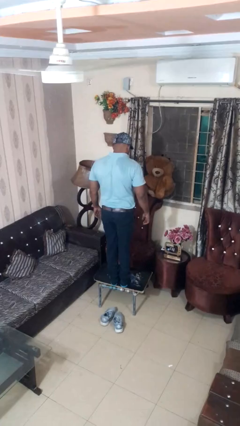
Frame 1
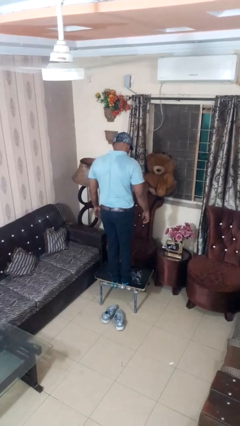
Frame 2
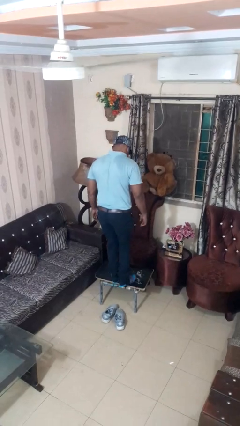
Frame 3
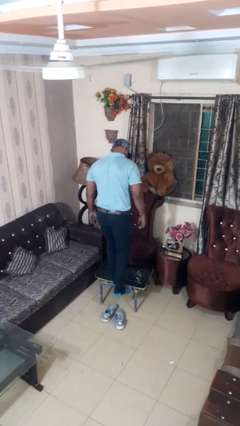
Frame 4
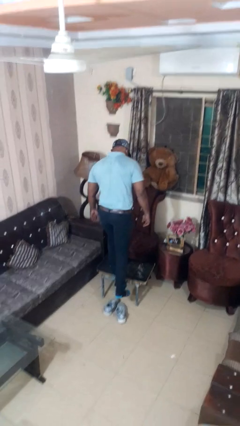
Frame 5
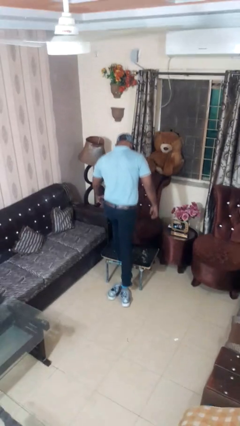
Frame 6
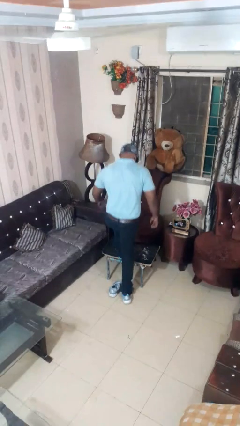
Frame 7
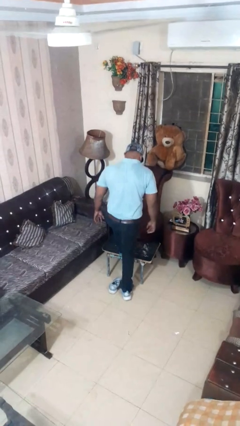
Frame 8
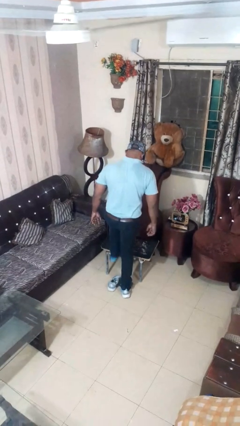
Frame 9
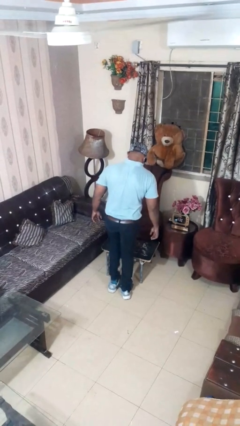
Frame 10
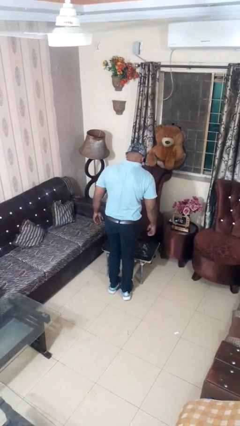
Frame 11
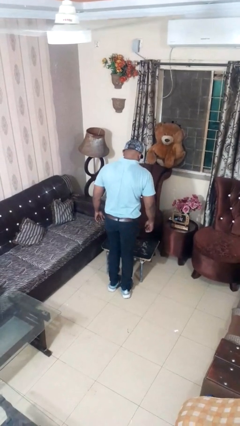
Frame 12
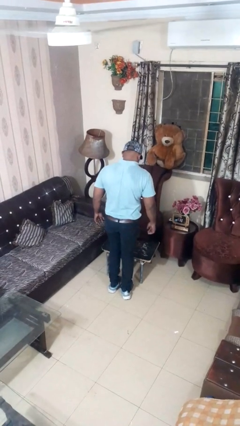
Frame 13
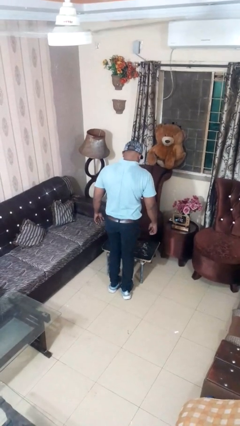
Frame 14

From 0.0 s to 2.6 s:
person climbs off table

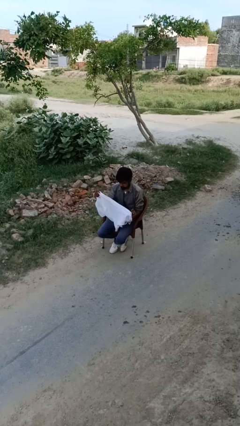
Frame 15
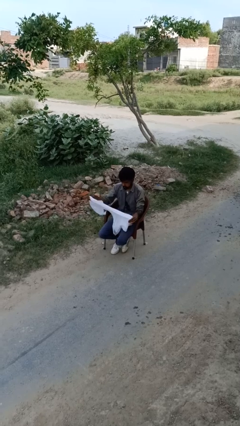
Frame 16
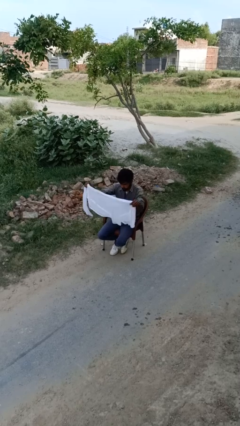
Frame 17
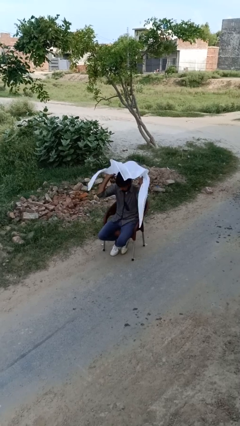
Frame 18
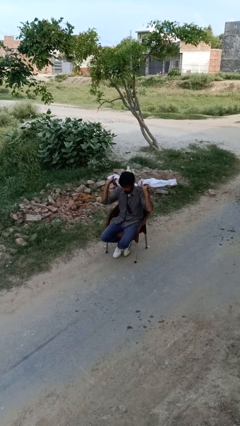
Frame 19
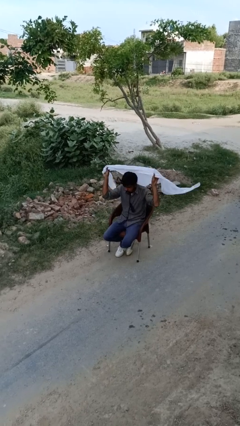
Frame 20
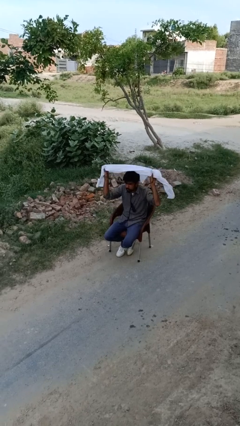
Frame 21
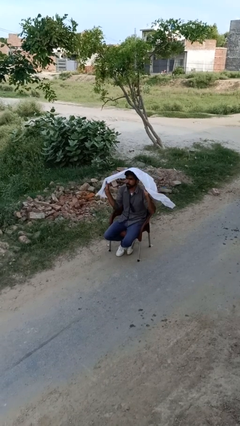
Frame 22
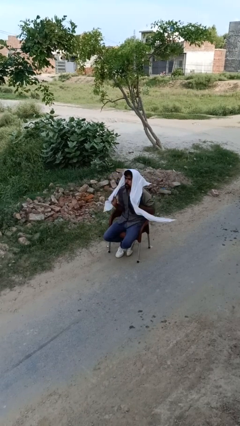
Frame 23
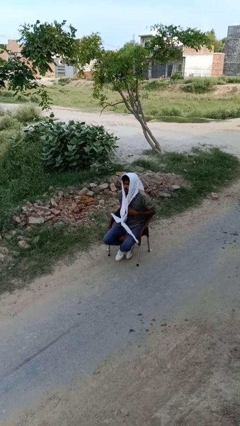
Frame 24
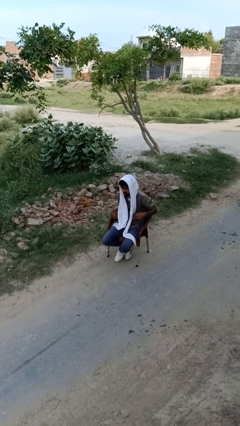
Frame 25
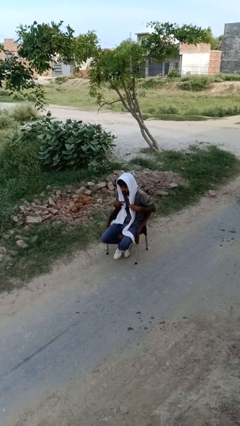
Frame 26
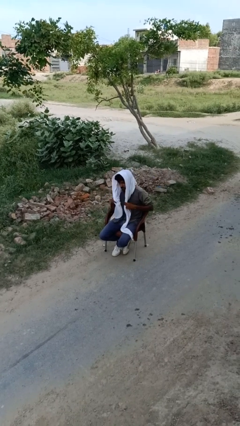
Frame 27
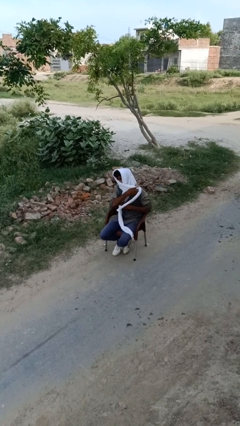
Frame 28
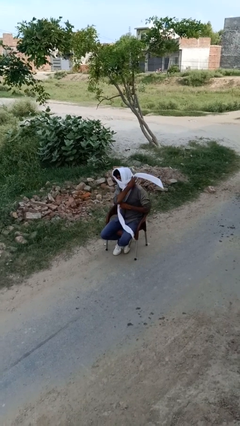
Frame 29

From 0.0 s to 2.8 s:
person puts on scarf

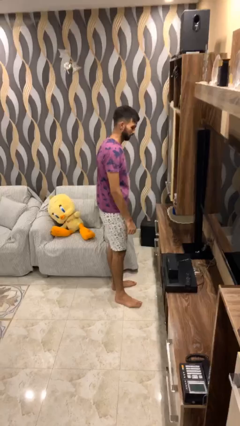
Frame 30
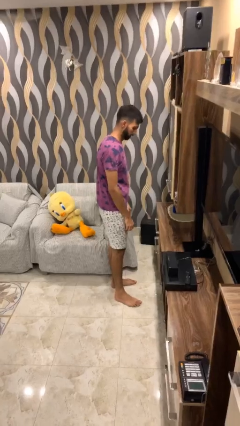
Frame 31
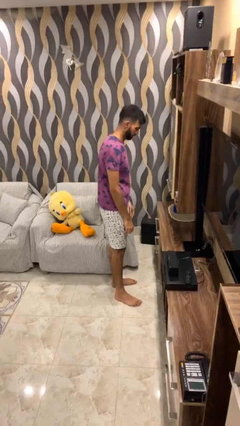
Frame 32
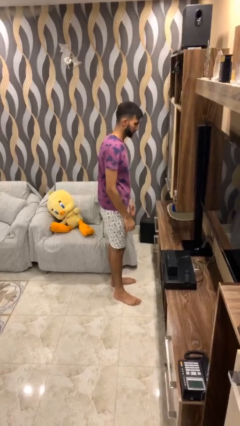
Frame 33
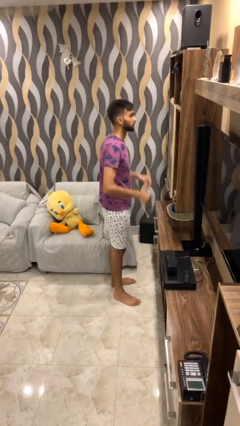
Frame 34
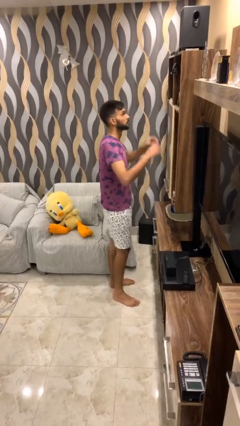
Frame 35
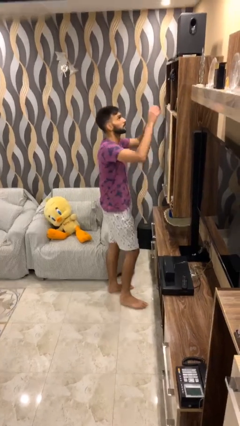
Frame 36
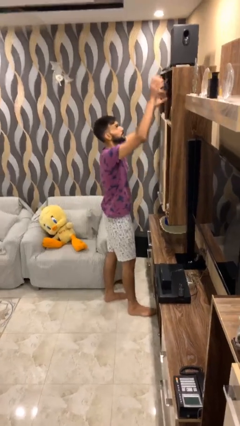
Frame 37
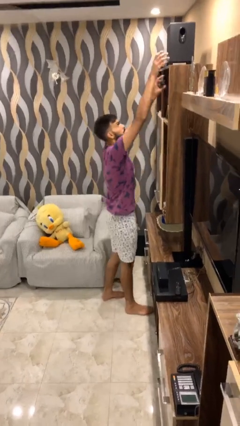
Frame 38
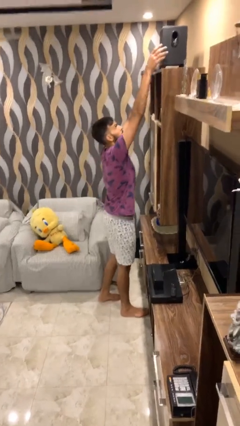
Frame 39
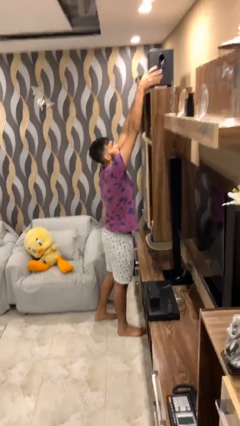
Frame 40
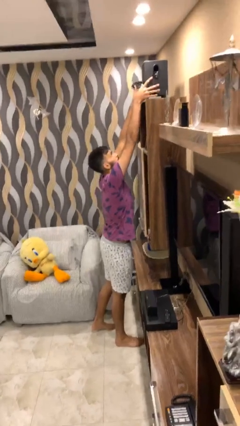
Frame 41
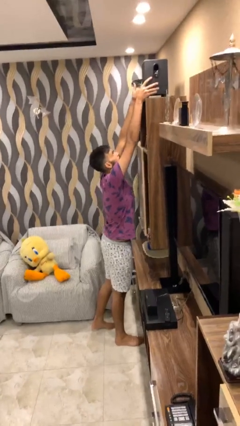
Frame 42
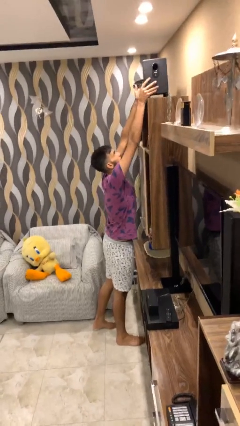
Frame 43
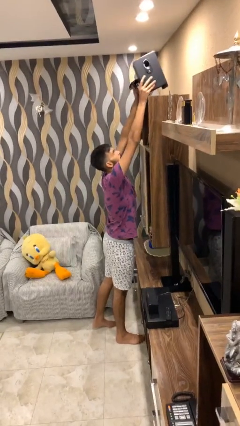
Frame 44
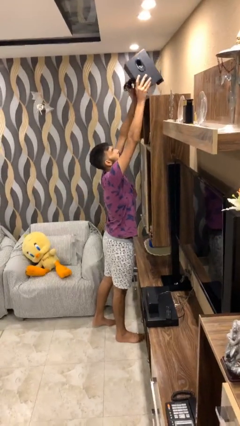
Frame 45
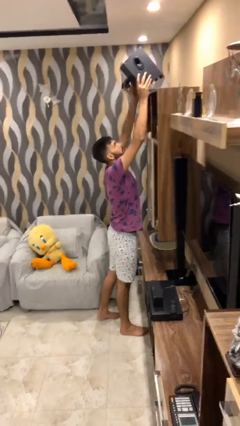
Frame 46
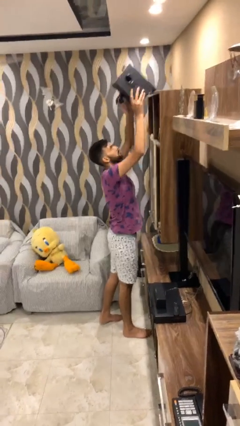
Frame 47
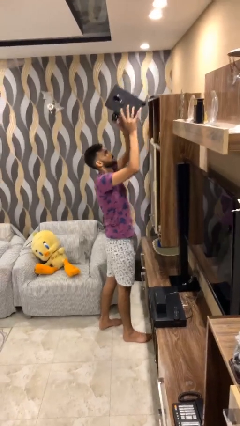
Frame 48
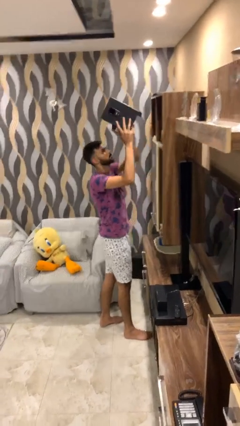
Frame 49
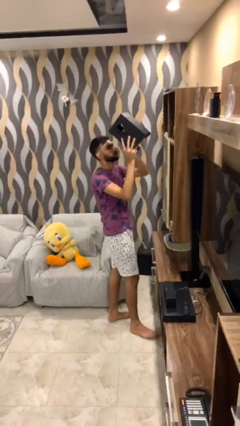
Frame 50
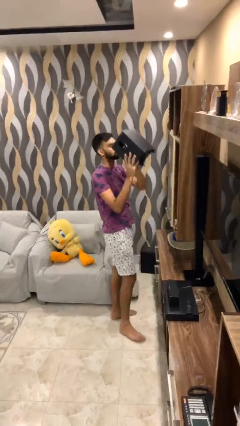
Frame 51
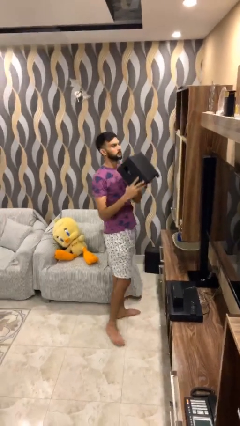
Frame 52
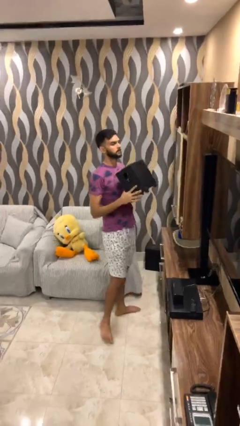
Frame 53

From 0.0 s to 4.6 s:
person picks up object from shelf

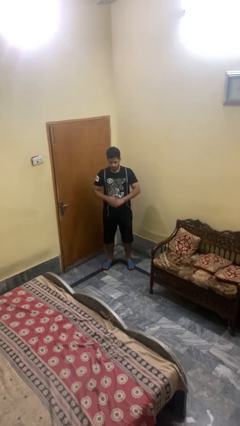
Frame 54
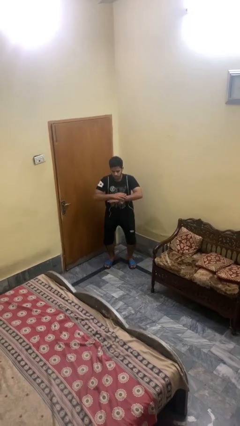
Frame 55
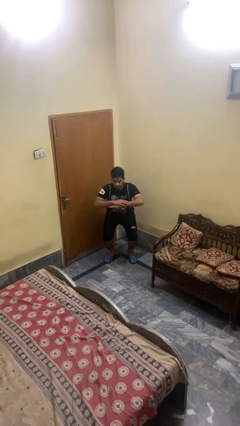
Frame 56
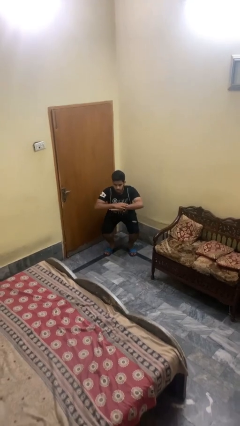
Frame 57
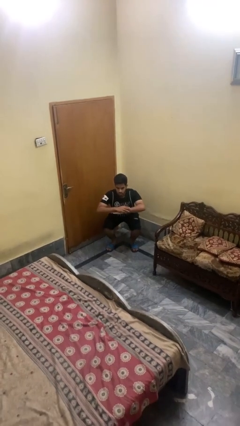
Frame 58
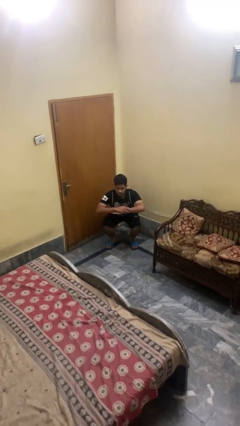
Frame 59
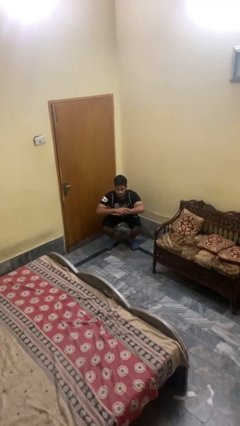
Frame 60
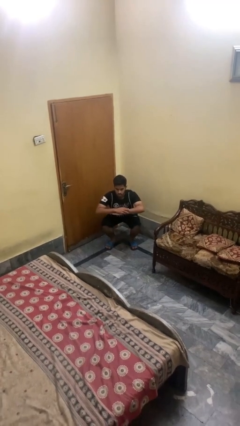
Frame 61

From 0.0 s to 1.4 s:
person squats

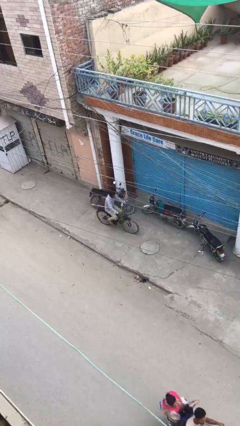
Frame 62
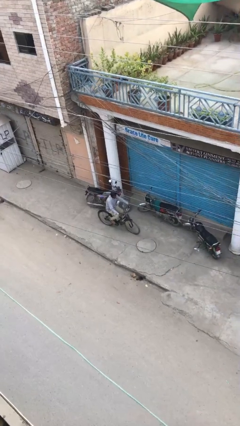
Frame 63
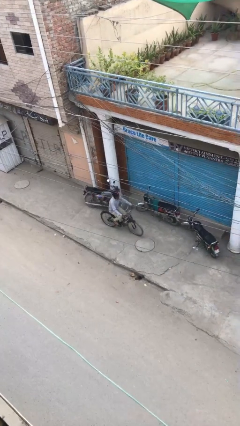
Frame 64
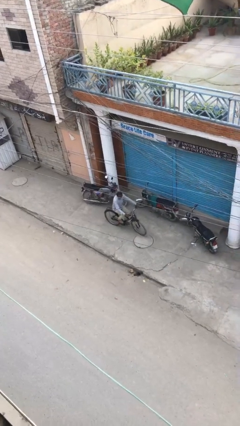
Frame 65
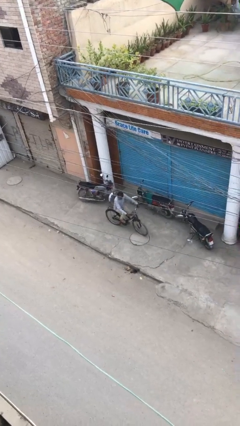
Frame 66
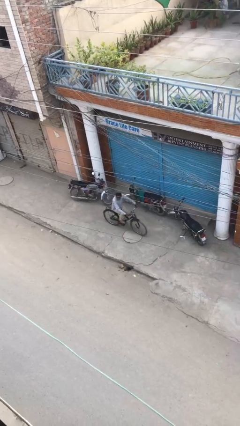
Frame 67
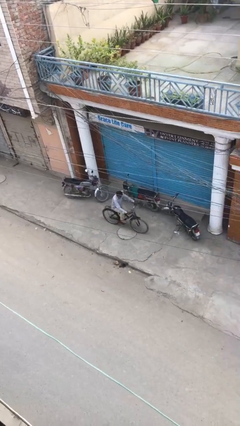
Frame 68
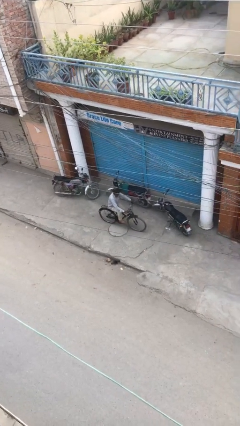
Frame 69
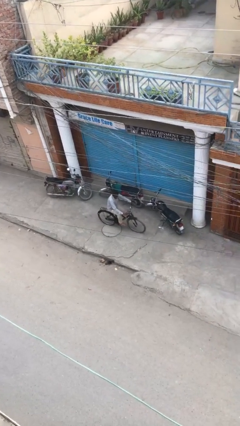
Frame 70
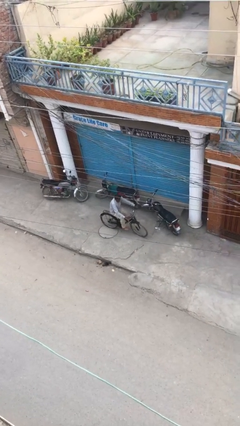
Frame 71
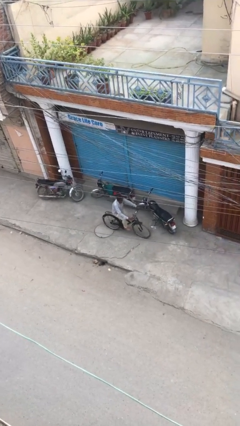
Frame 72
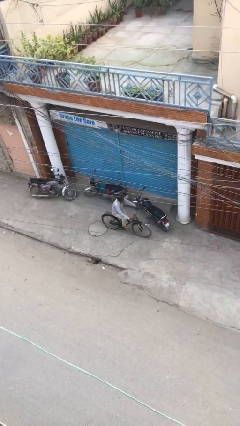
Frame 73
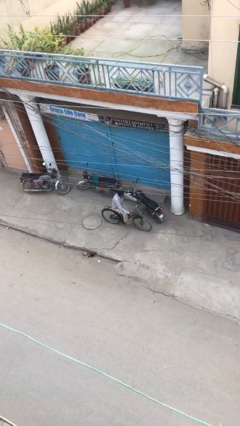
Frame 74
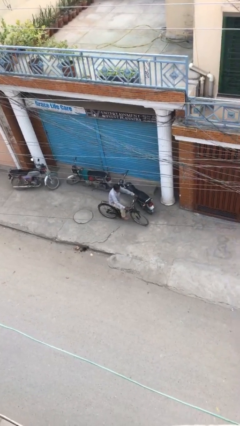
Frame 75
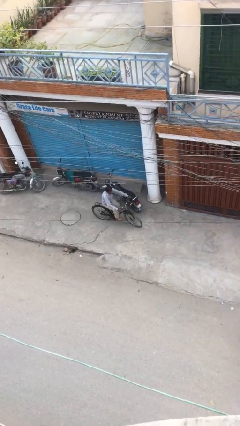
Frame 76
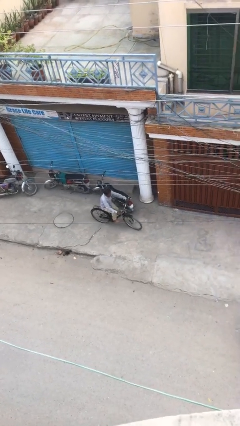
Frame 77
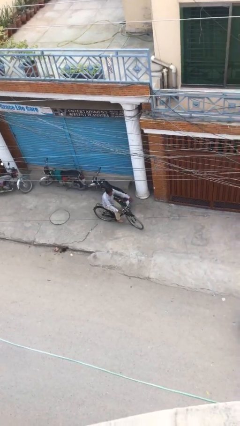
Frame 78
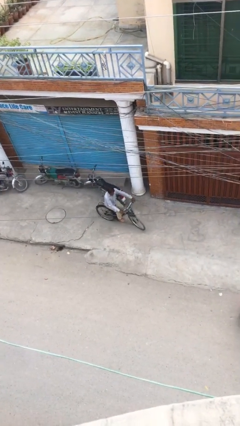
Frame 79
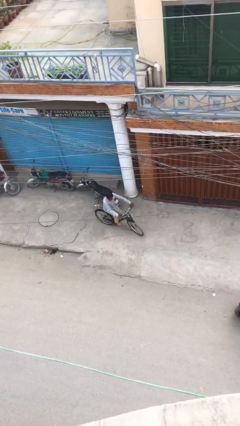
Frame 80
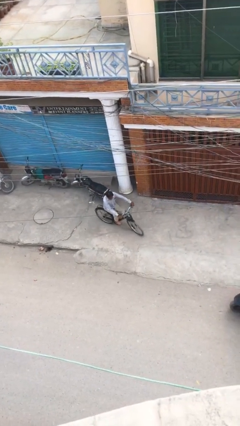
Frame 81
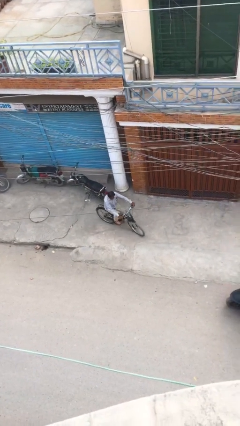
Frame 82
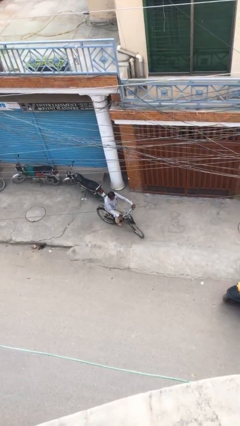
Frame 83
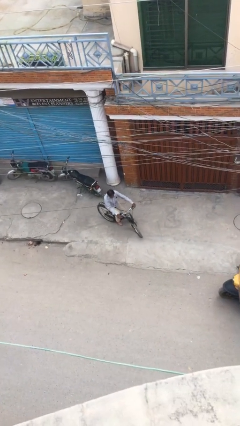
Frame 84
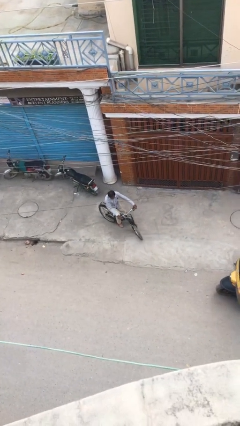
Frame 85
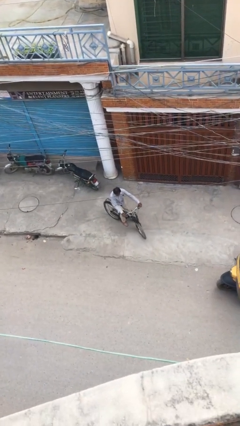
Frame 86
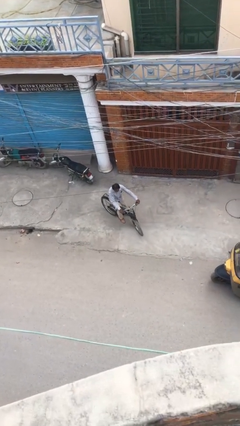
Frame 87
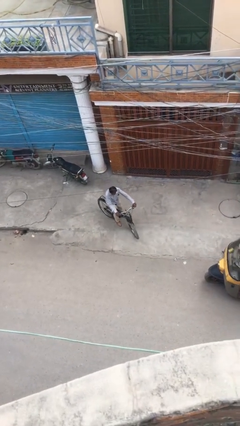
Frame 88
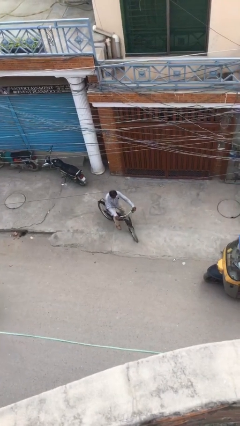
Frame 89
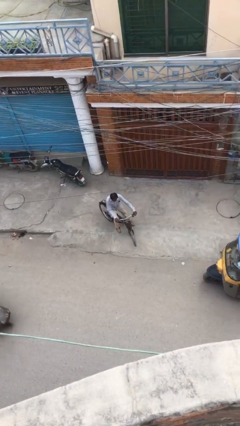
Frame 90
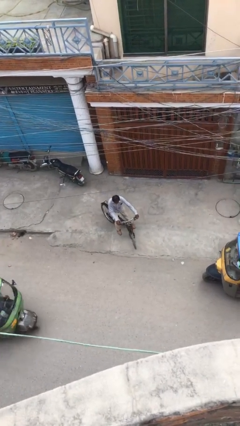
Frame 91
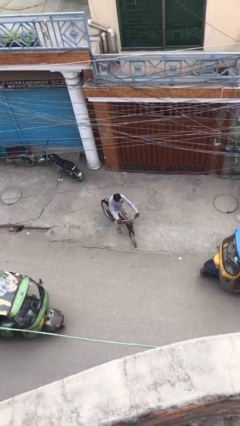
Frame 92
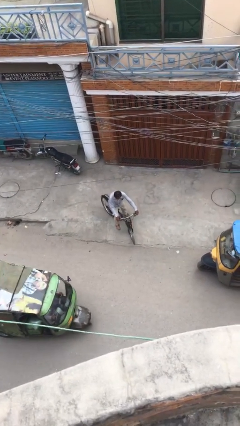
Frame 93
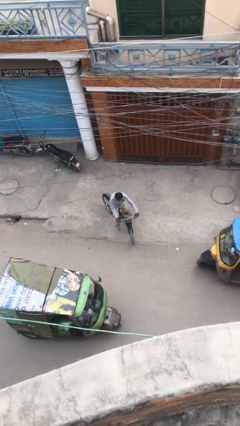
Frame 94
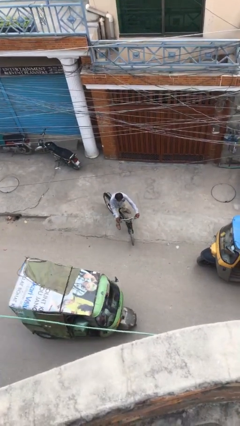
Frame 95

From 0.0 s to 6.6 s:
person rides bicycle
